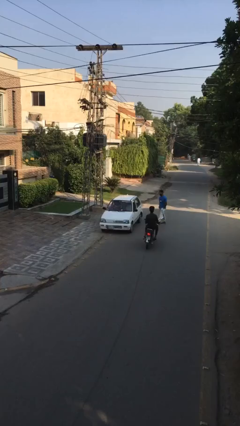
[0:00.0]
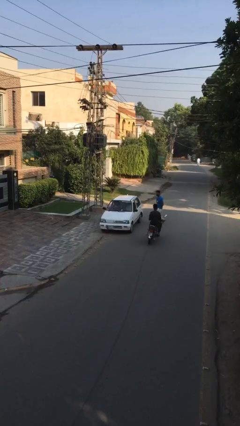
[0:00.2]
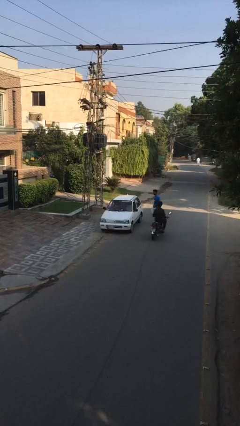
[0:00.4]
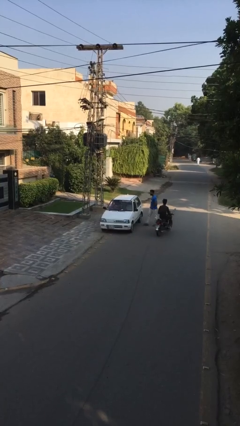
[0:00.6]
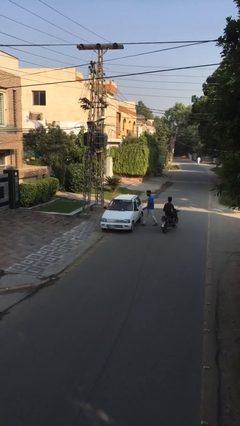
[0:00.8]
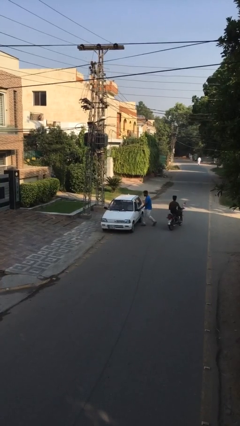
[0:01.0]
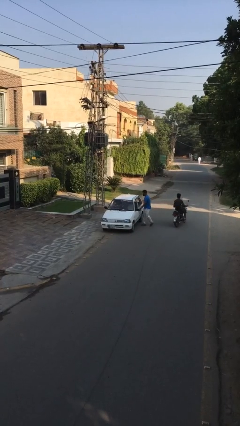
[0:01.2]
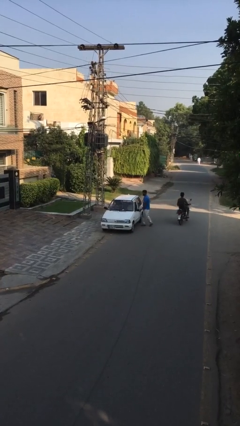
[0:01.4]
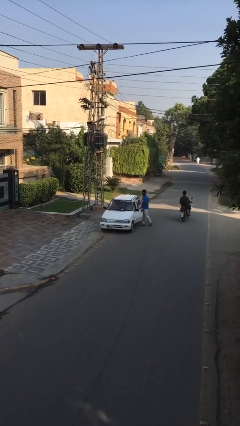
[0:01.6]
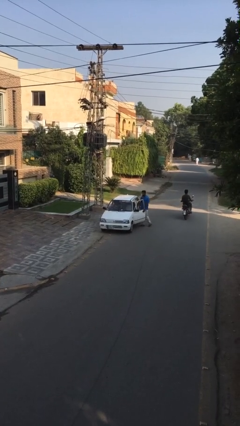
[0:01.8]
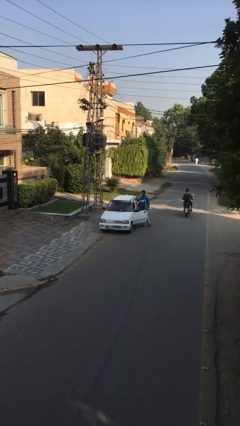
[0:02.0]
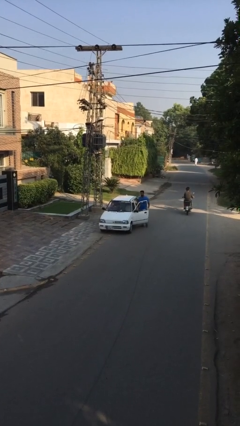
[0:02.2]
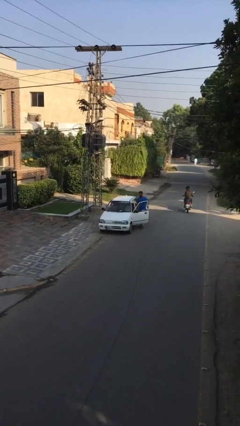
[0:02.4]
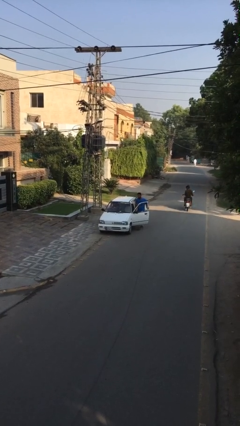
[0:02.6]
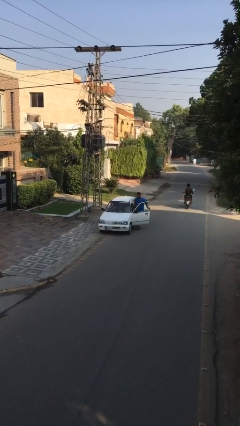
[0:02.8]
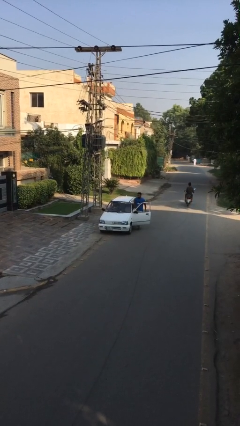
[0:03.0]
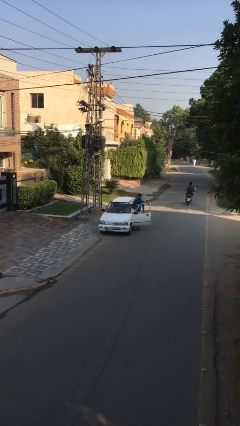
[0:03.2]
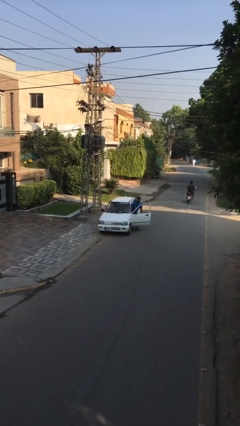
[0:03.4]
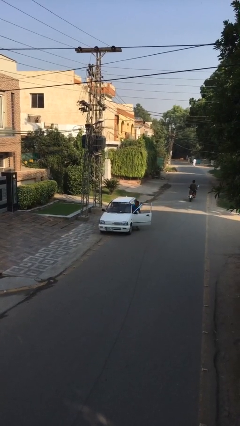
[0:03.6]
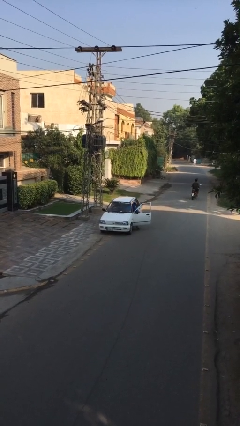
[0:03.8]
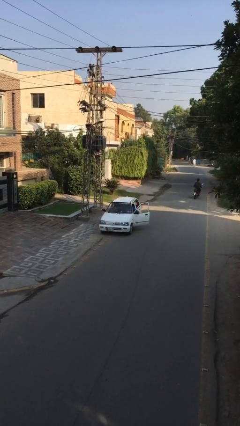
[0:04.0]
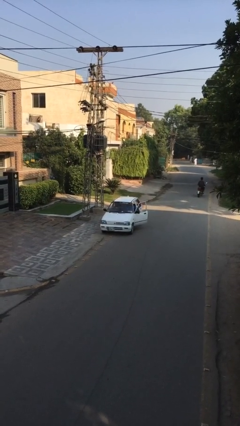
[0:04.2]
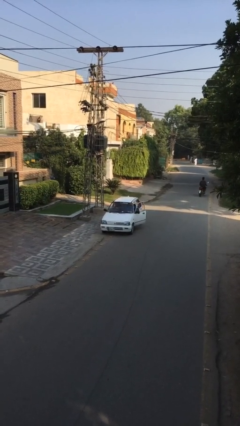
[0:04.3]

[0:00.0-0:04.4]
car picks up person

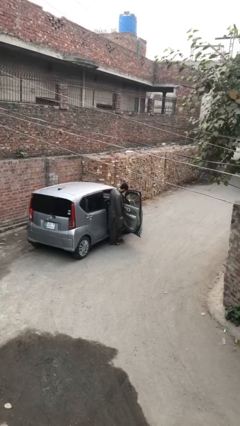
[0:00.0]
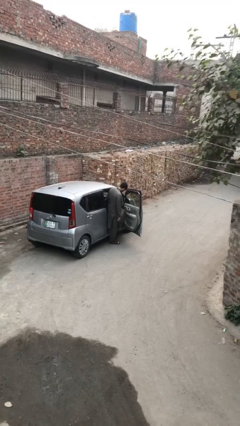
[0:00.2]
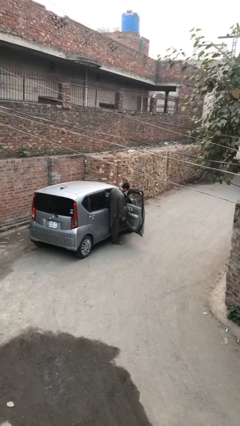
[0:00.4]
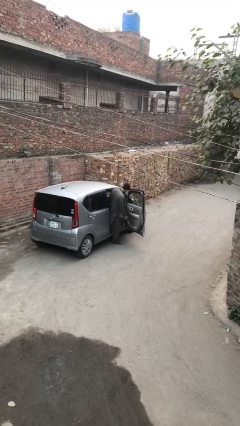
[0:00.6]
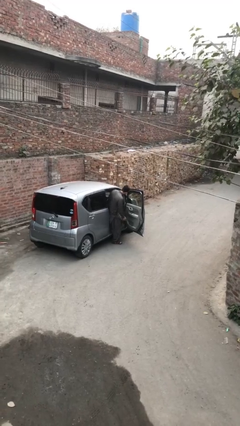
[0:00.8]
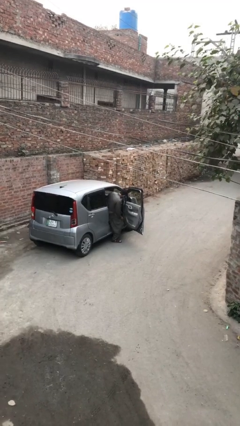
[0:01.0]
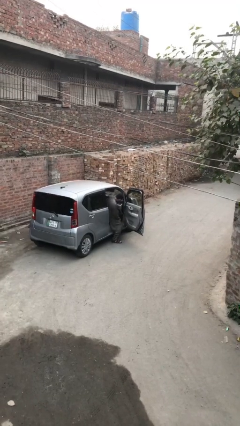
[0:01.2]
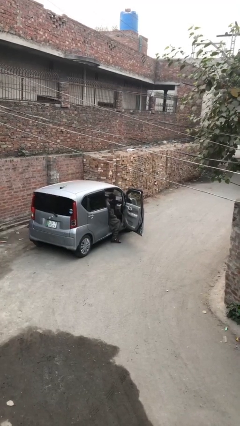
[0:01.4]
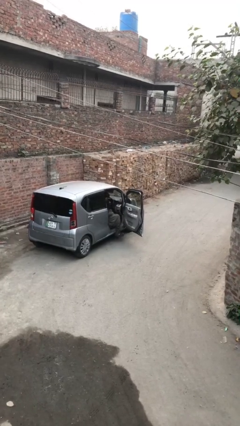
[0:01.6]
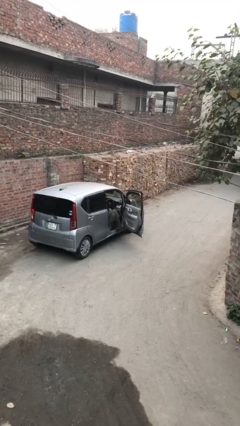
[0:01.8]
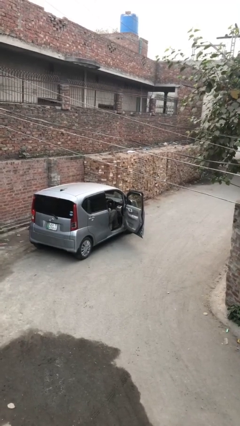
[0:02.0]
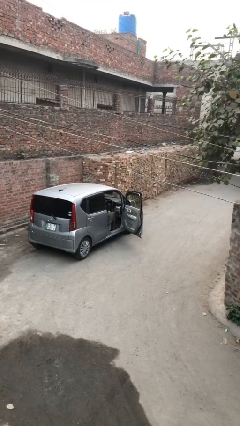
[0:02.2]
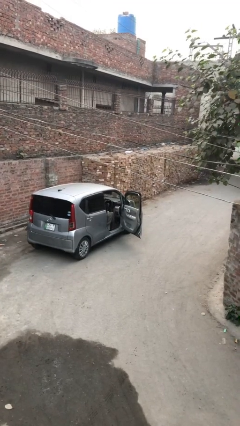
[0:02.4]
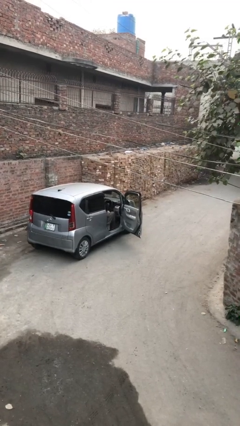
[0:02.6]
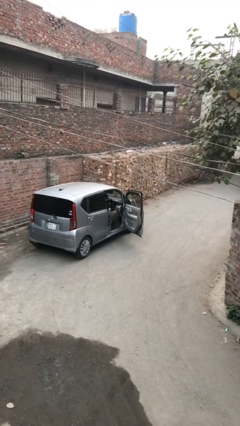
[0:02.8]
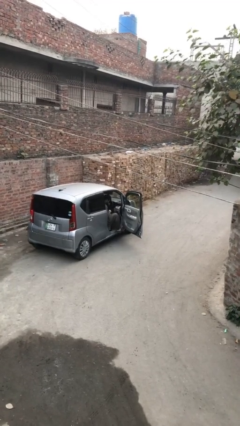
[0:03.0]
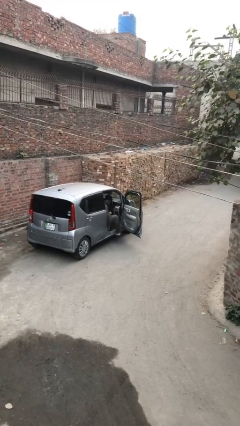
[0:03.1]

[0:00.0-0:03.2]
person enters car

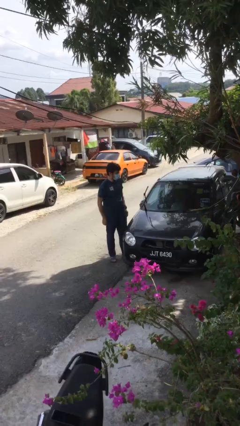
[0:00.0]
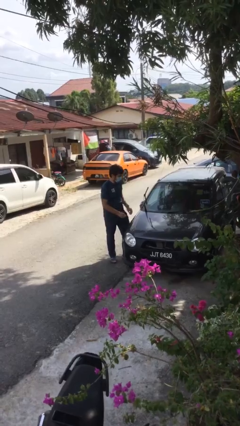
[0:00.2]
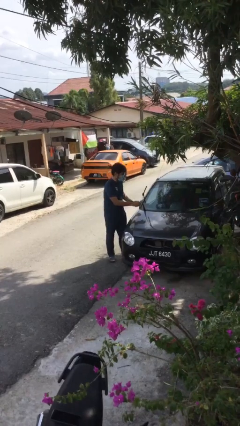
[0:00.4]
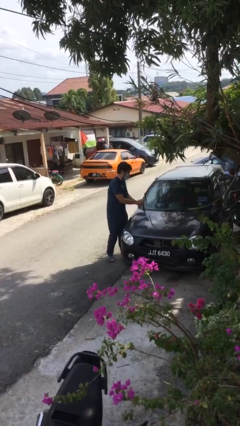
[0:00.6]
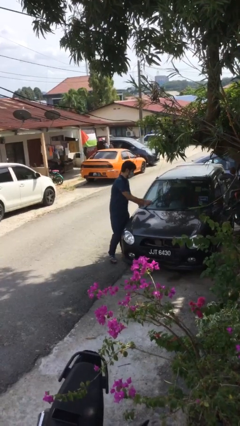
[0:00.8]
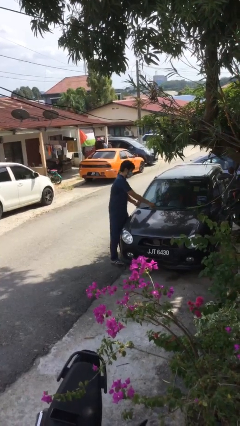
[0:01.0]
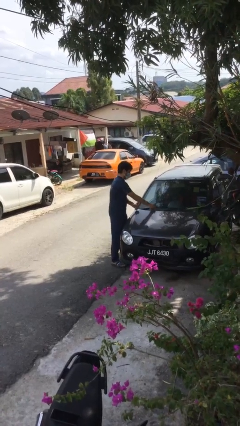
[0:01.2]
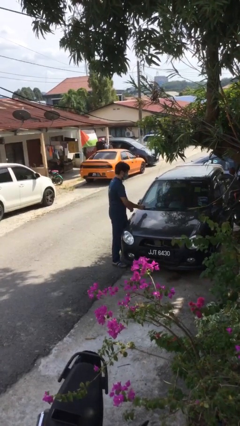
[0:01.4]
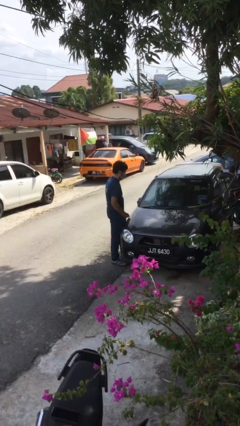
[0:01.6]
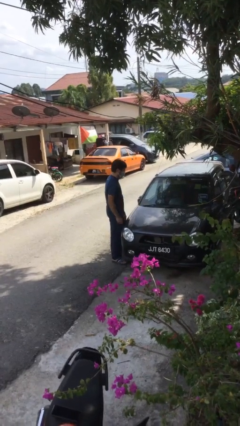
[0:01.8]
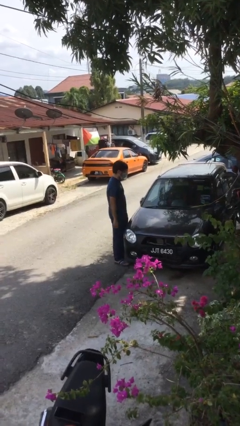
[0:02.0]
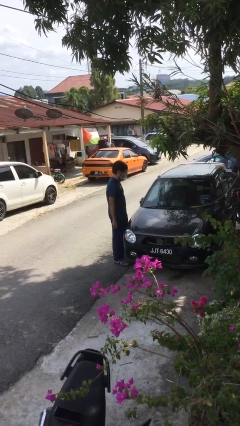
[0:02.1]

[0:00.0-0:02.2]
person flips down car wipers

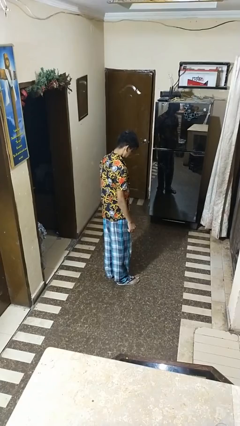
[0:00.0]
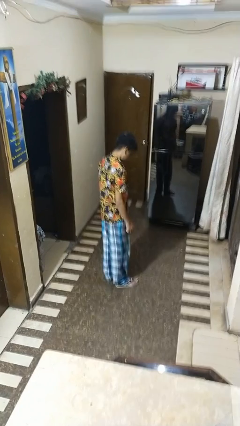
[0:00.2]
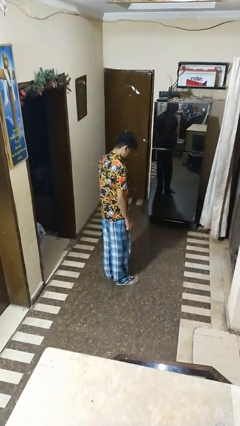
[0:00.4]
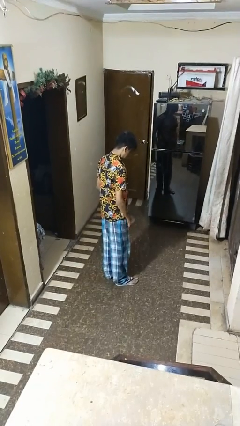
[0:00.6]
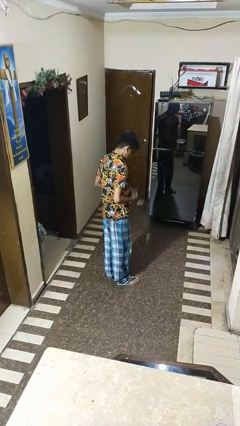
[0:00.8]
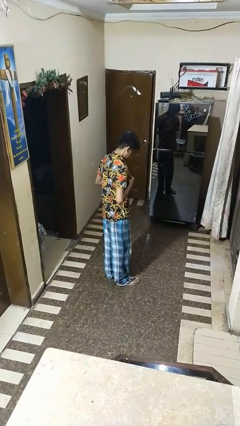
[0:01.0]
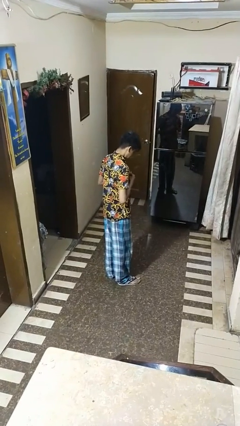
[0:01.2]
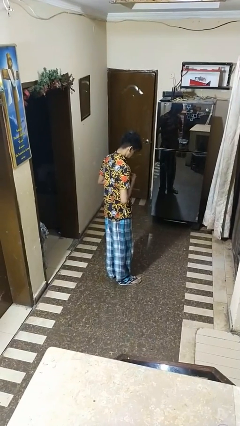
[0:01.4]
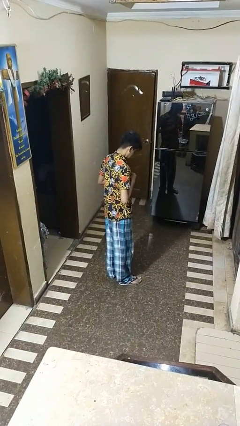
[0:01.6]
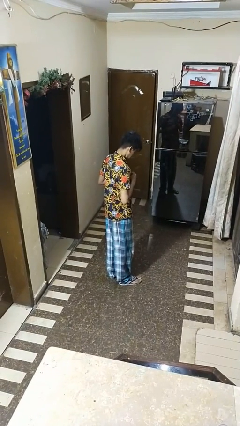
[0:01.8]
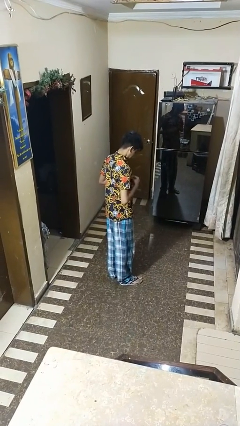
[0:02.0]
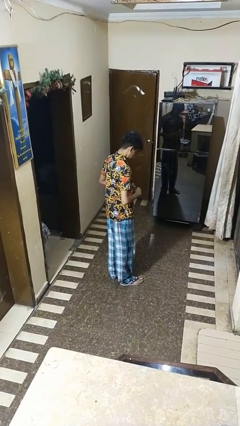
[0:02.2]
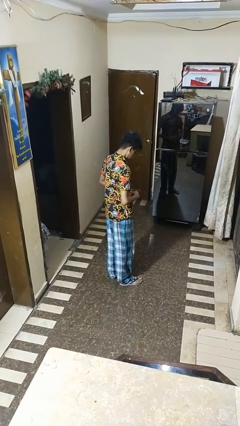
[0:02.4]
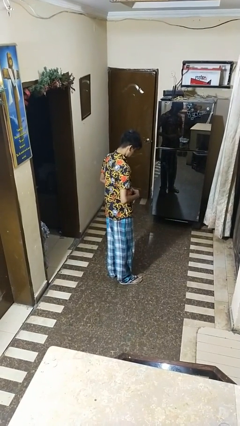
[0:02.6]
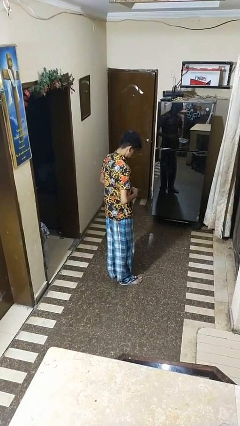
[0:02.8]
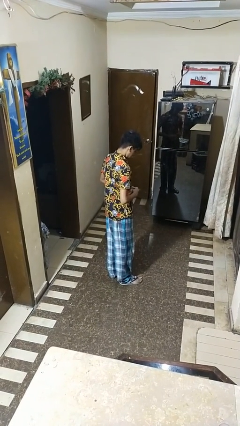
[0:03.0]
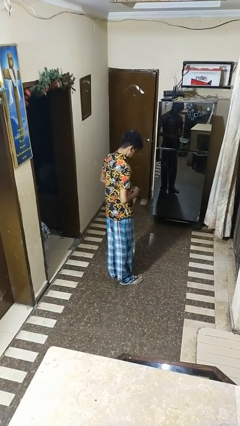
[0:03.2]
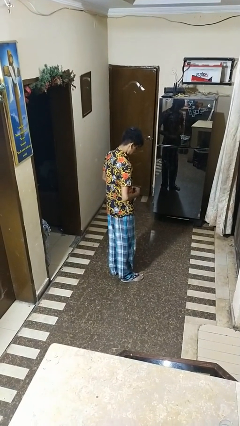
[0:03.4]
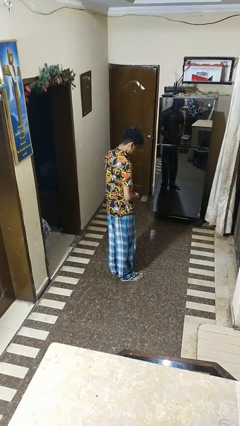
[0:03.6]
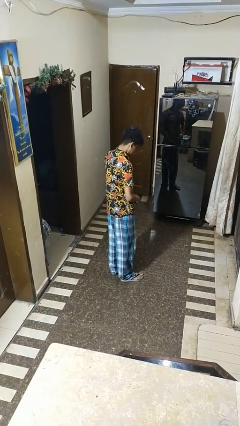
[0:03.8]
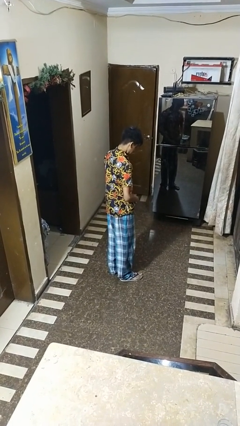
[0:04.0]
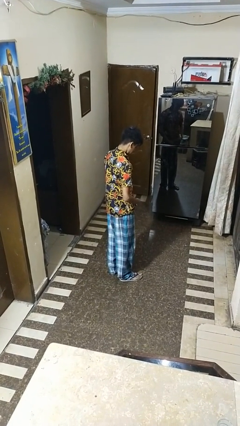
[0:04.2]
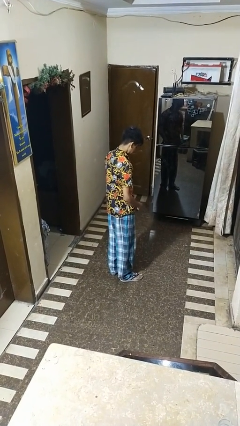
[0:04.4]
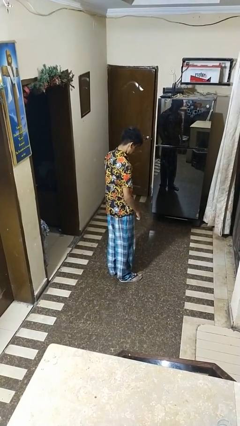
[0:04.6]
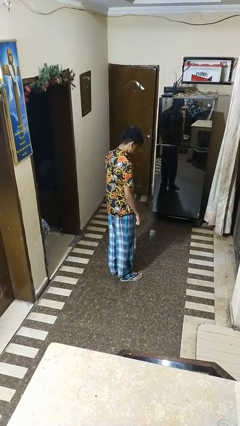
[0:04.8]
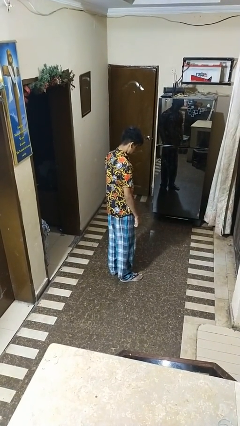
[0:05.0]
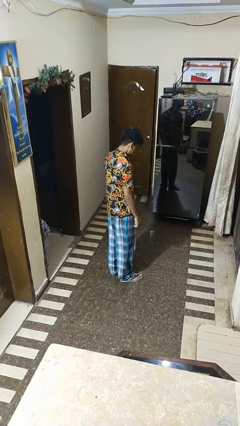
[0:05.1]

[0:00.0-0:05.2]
person buttons shirt

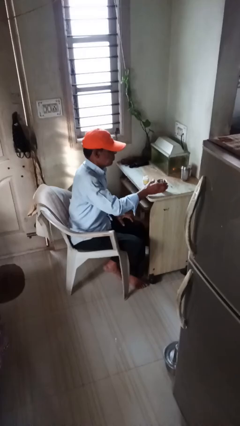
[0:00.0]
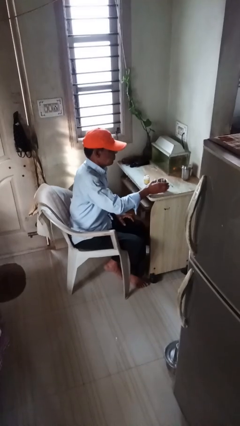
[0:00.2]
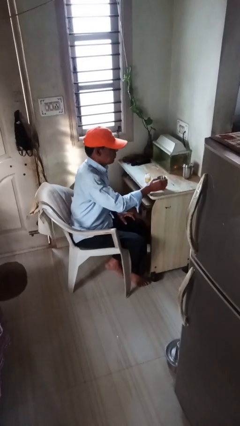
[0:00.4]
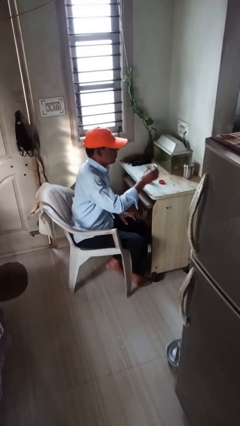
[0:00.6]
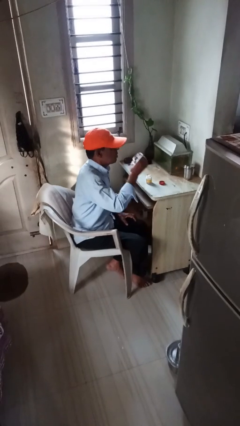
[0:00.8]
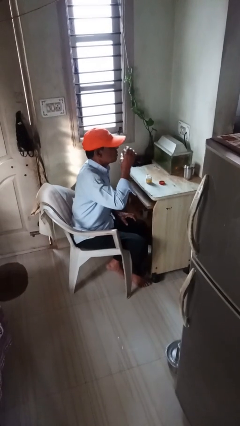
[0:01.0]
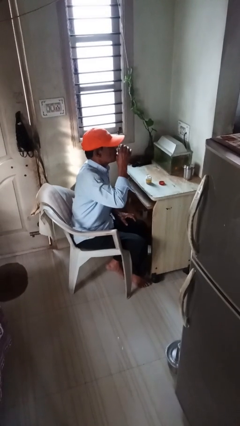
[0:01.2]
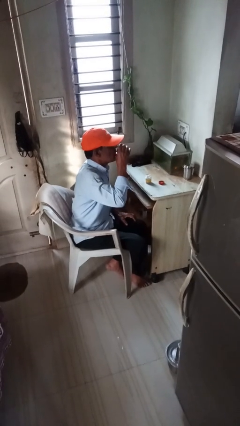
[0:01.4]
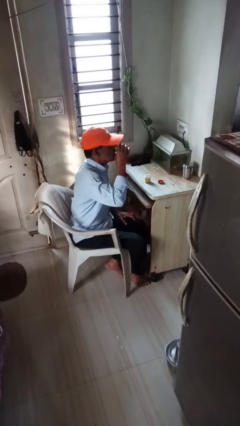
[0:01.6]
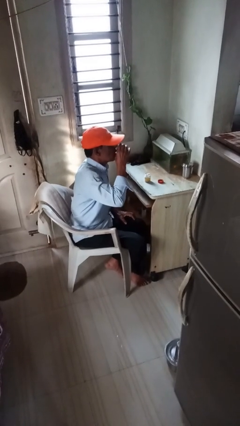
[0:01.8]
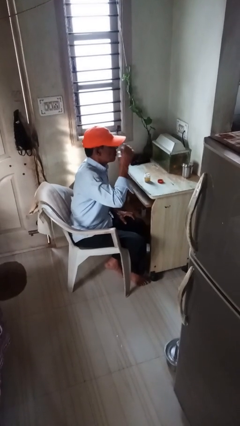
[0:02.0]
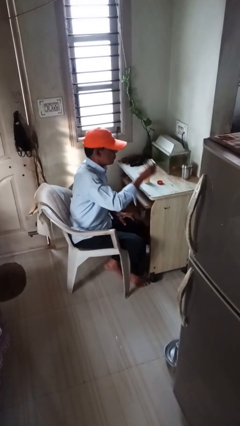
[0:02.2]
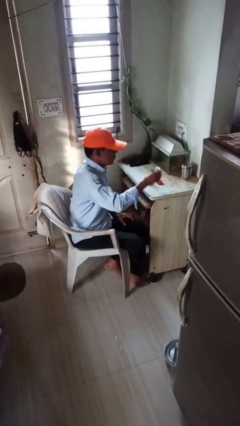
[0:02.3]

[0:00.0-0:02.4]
person drinks from cup
